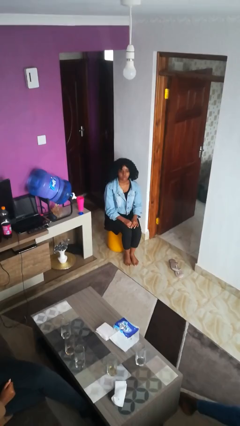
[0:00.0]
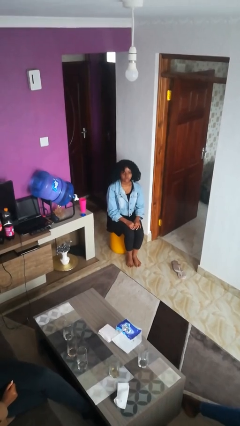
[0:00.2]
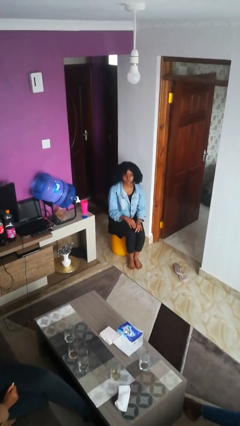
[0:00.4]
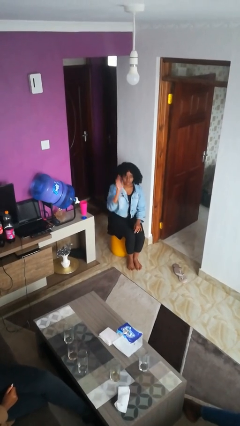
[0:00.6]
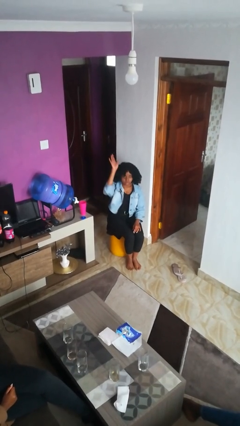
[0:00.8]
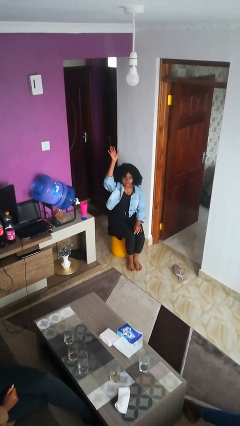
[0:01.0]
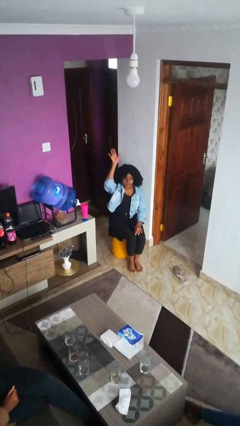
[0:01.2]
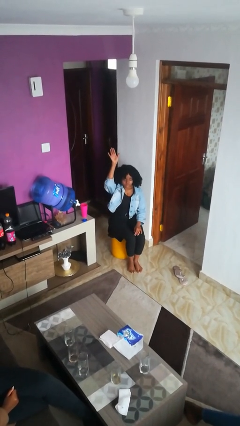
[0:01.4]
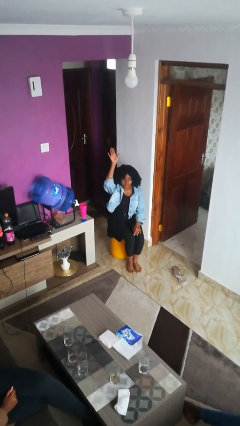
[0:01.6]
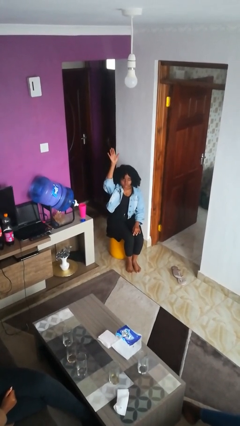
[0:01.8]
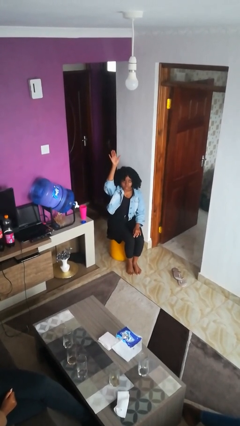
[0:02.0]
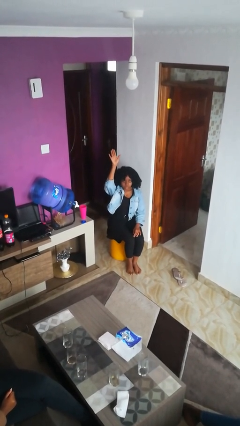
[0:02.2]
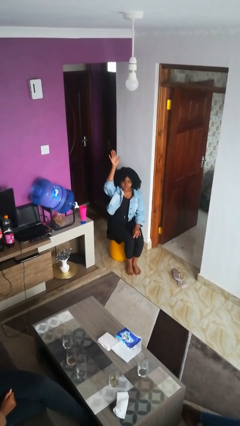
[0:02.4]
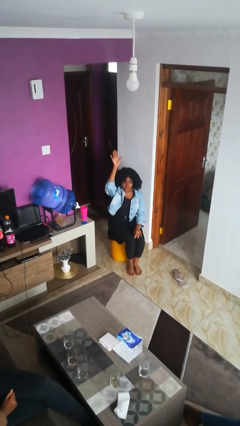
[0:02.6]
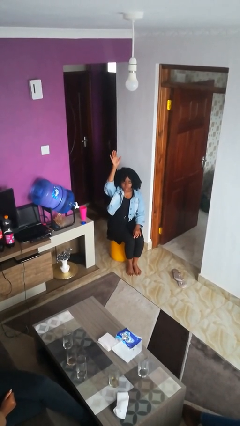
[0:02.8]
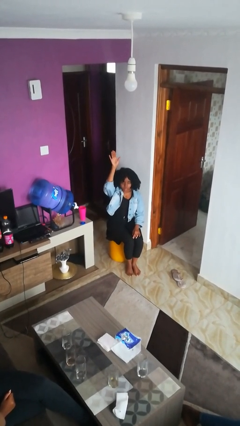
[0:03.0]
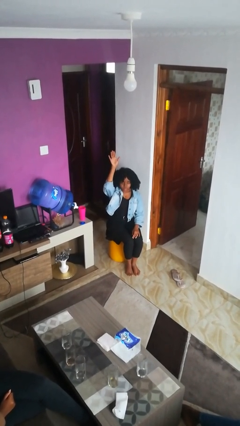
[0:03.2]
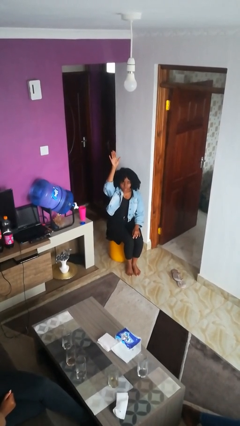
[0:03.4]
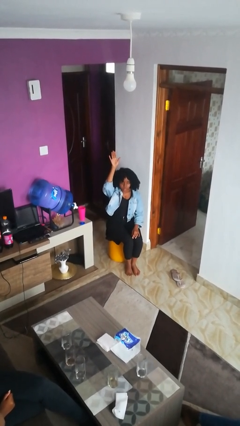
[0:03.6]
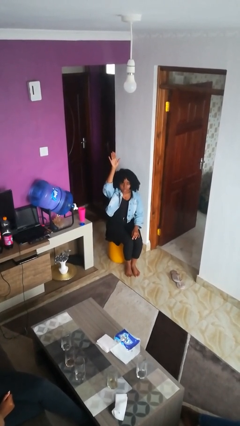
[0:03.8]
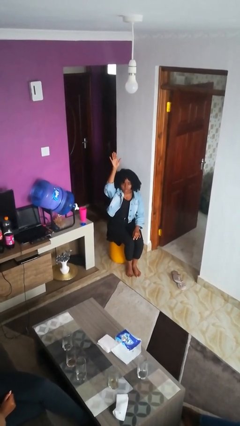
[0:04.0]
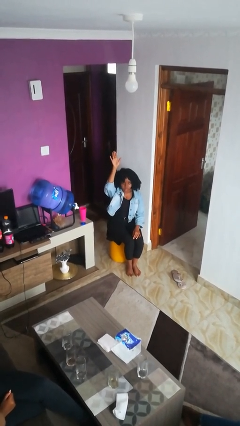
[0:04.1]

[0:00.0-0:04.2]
person gestures raise hand

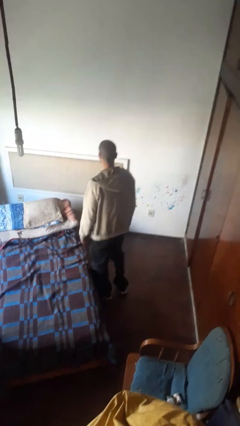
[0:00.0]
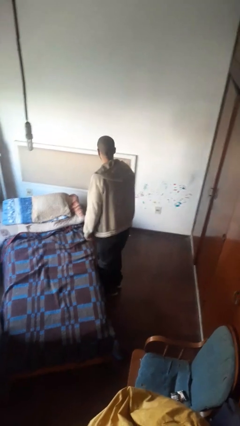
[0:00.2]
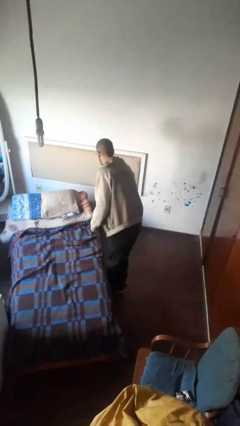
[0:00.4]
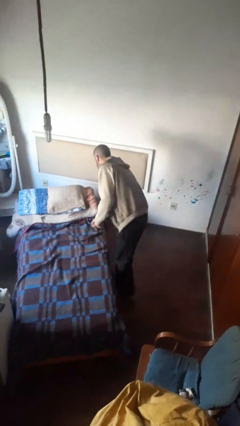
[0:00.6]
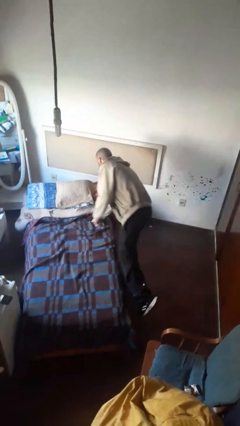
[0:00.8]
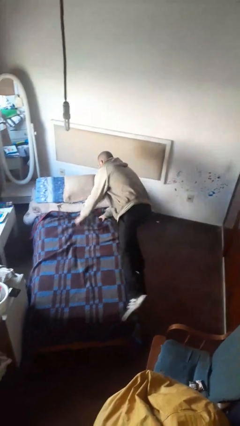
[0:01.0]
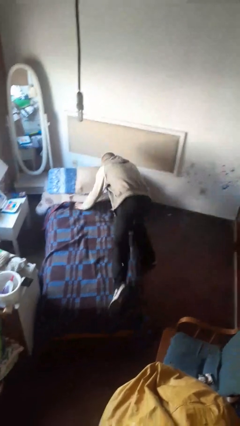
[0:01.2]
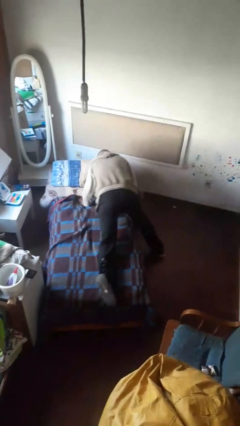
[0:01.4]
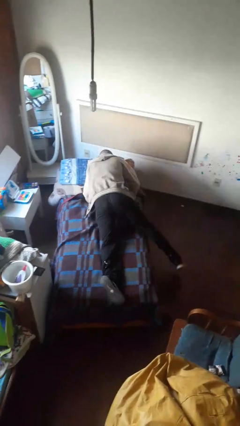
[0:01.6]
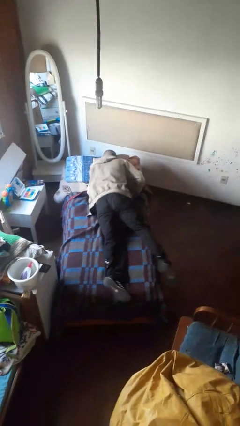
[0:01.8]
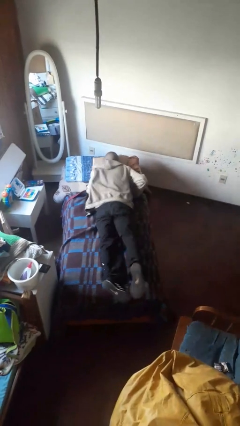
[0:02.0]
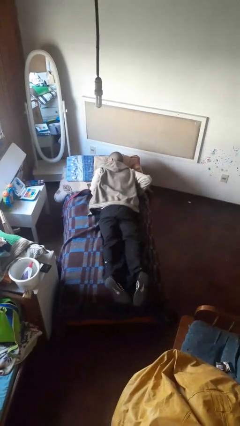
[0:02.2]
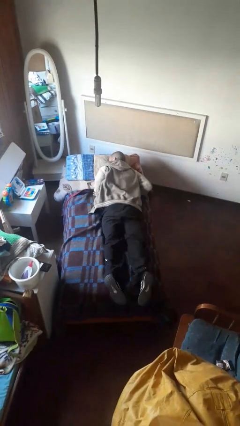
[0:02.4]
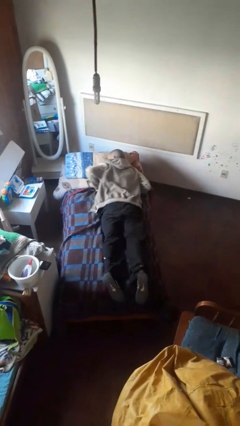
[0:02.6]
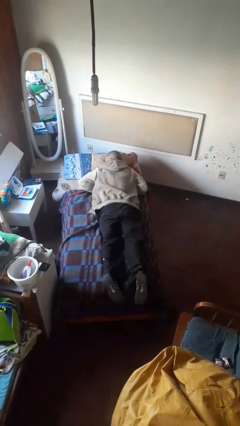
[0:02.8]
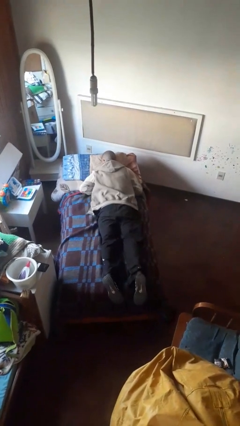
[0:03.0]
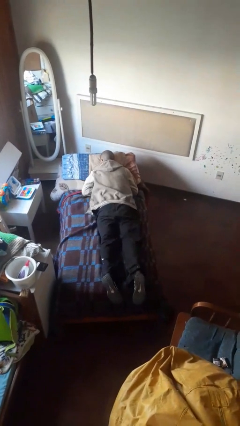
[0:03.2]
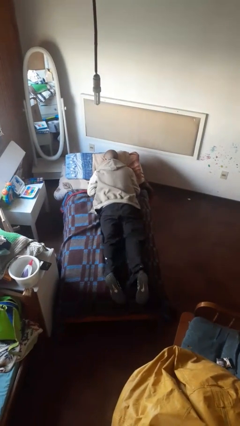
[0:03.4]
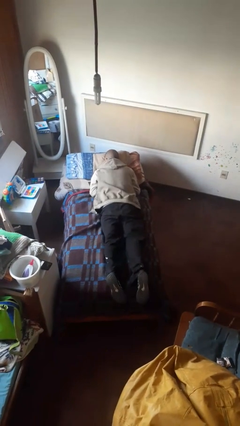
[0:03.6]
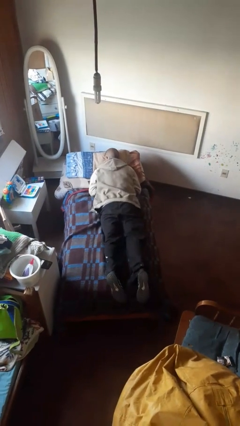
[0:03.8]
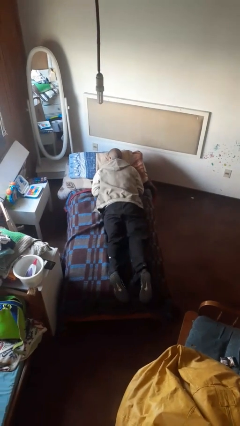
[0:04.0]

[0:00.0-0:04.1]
person lies down on bed

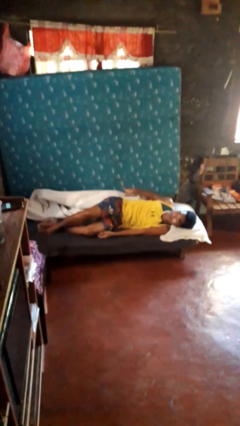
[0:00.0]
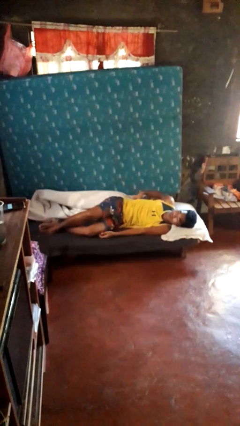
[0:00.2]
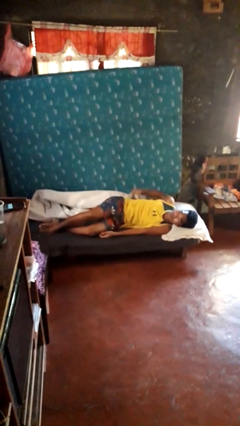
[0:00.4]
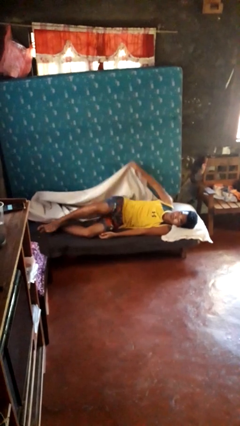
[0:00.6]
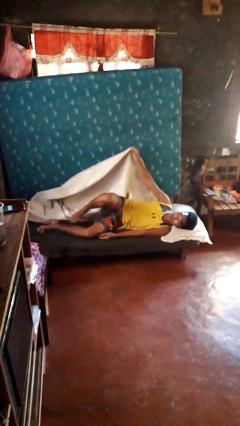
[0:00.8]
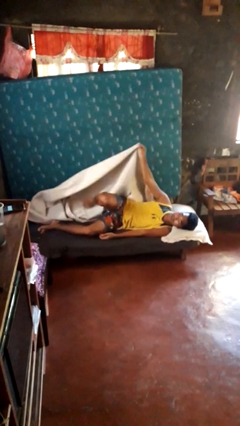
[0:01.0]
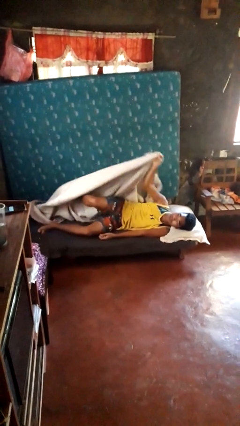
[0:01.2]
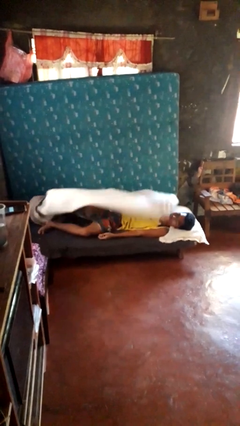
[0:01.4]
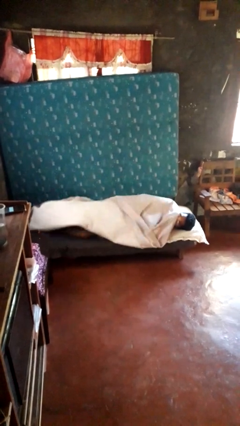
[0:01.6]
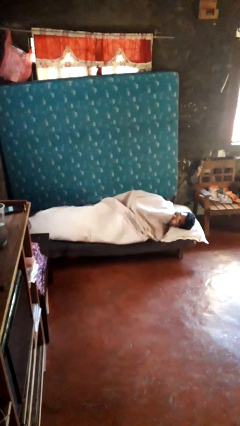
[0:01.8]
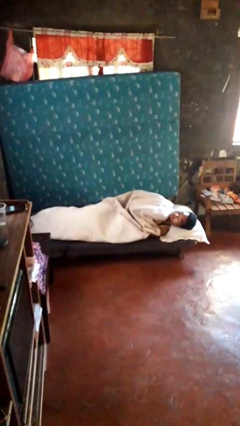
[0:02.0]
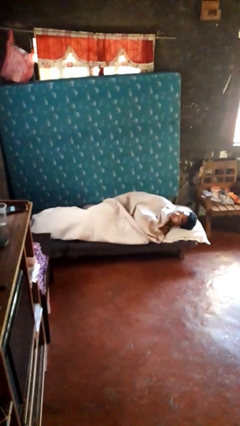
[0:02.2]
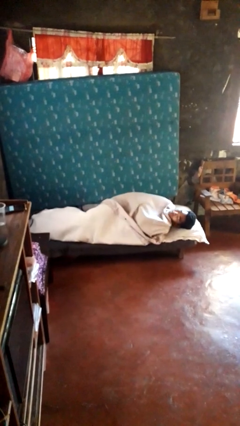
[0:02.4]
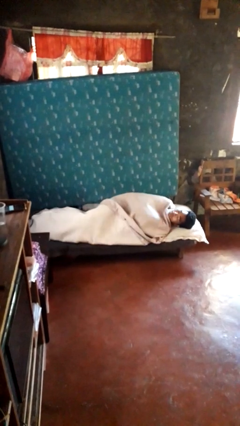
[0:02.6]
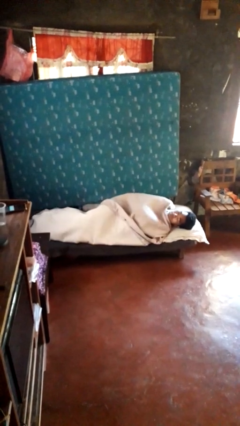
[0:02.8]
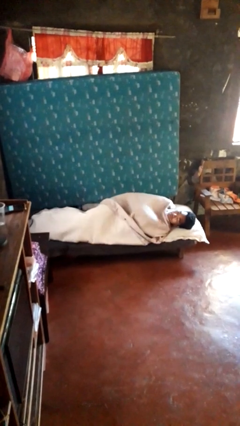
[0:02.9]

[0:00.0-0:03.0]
person covers with bedsheets

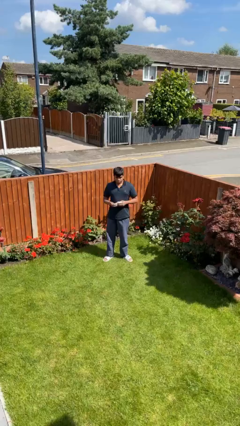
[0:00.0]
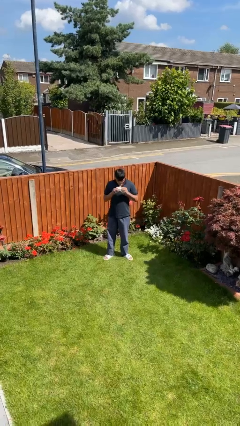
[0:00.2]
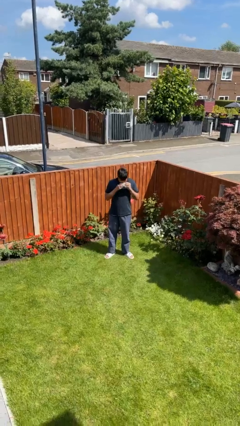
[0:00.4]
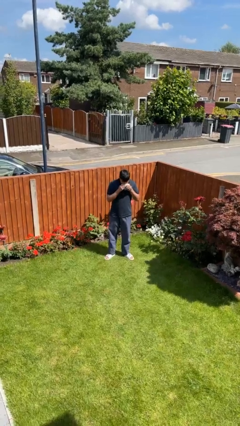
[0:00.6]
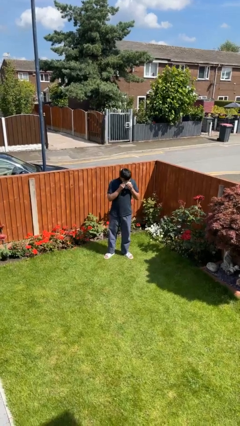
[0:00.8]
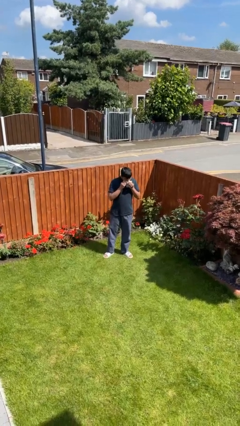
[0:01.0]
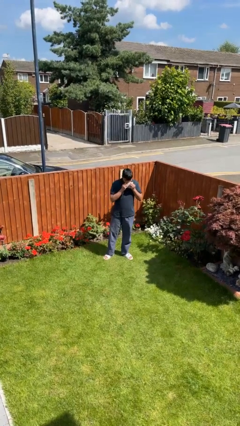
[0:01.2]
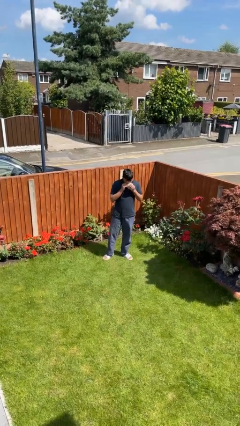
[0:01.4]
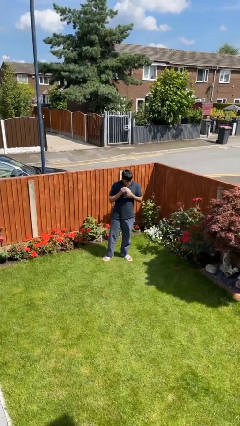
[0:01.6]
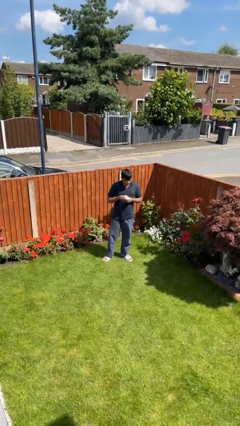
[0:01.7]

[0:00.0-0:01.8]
person wipes mouth with napkin

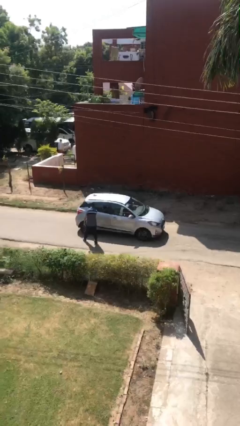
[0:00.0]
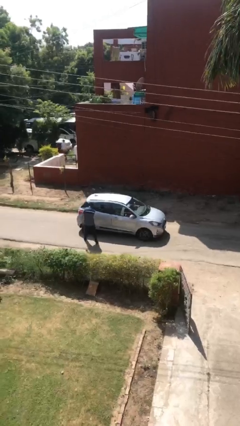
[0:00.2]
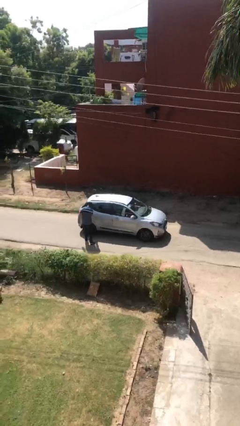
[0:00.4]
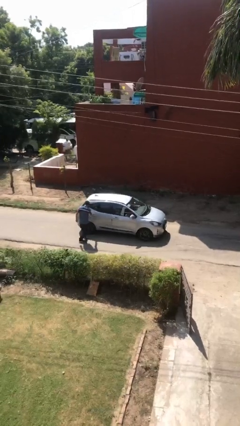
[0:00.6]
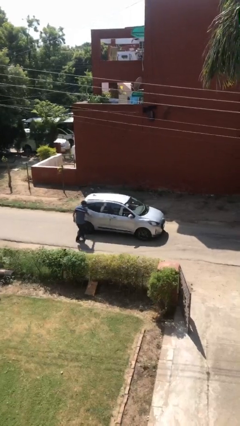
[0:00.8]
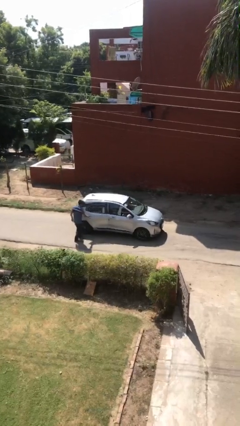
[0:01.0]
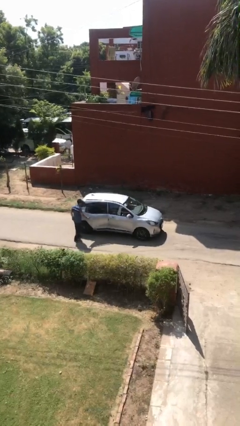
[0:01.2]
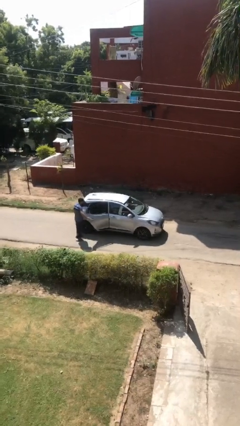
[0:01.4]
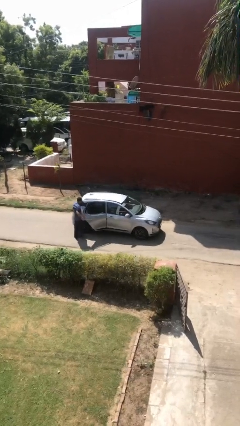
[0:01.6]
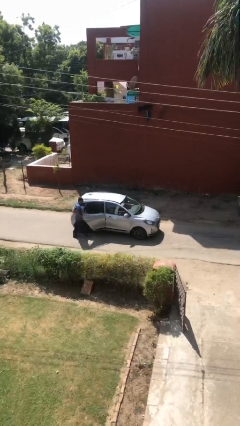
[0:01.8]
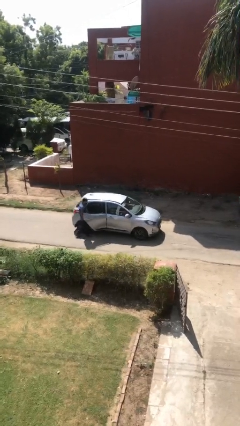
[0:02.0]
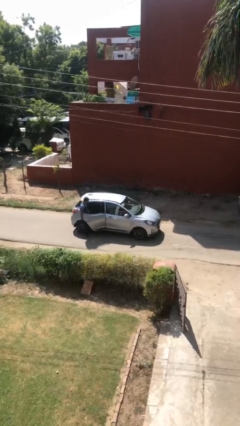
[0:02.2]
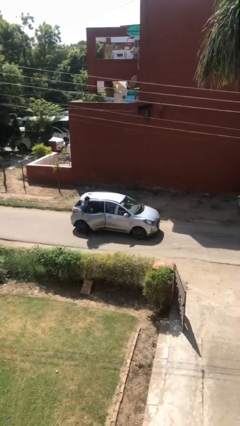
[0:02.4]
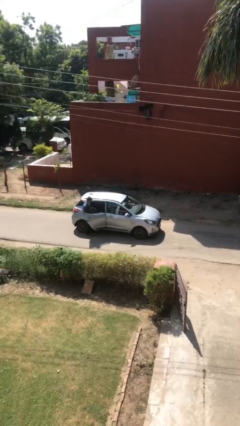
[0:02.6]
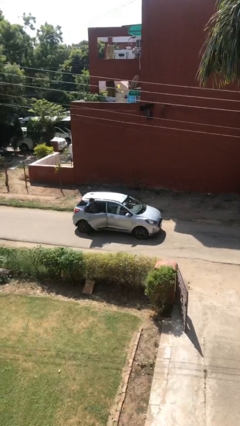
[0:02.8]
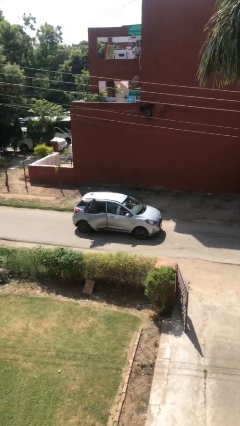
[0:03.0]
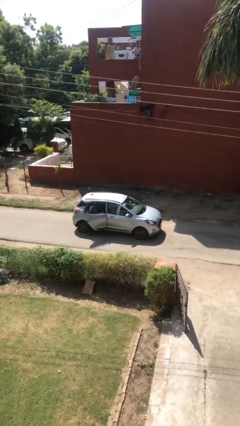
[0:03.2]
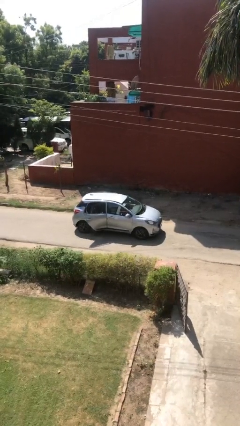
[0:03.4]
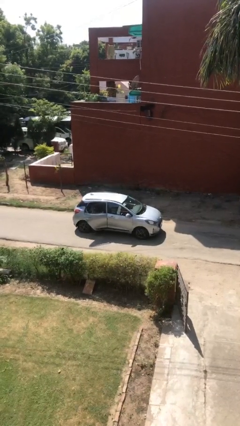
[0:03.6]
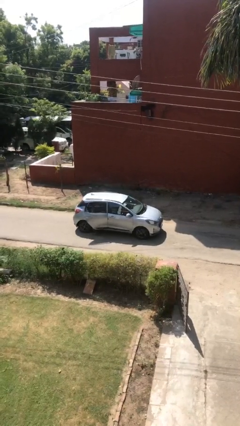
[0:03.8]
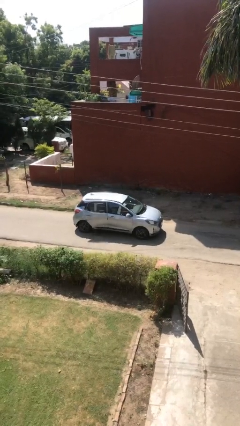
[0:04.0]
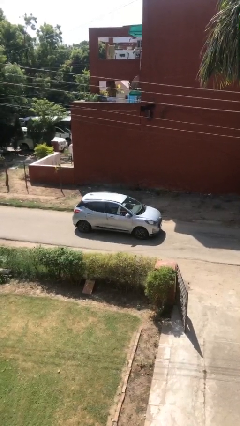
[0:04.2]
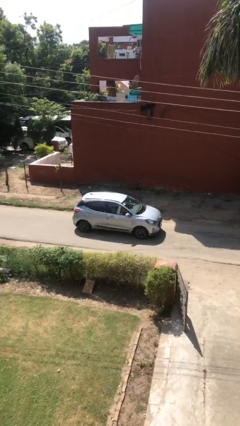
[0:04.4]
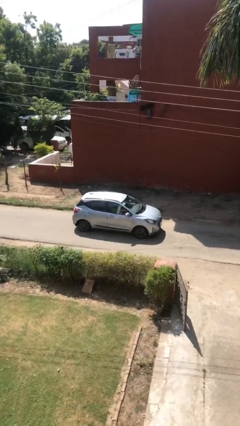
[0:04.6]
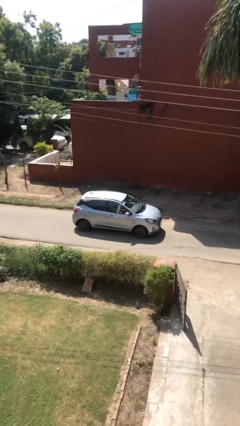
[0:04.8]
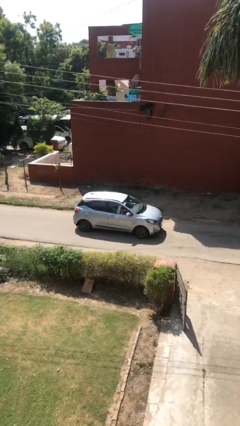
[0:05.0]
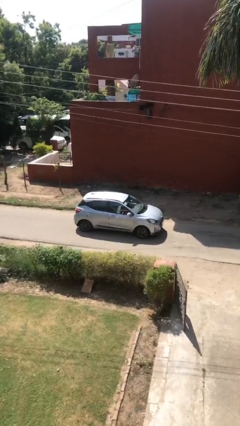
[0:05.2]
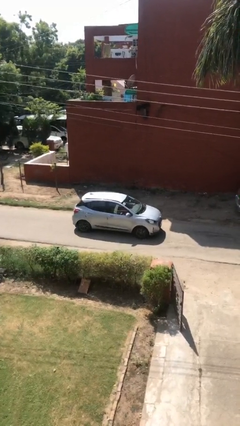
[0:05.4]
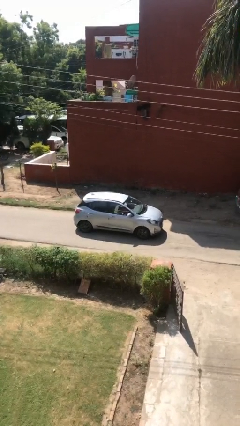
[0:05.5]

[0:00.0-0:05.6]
car picks up person
